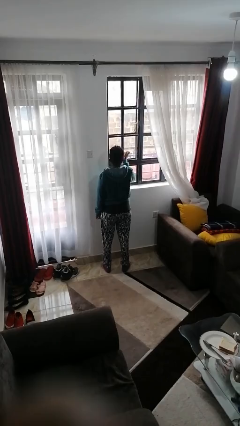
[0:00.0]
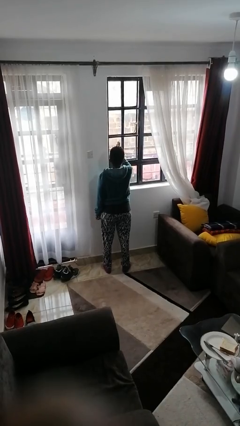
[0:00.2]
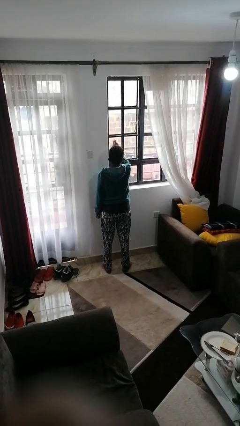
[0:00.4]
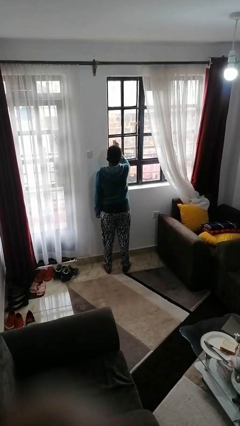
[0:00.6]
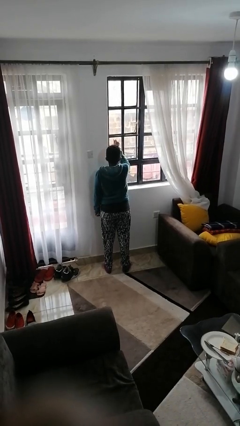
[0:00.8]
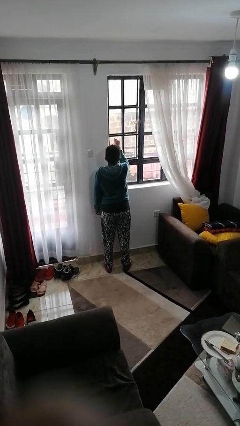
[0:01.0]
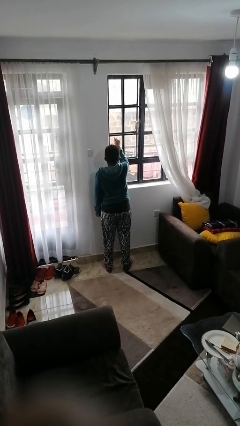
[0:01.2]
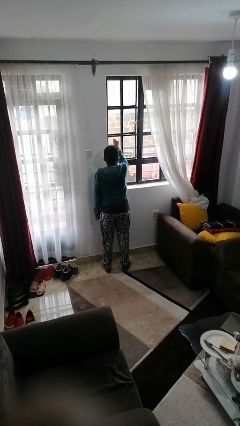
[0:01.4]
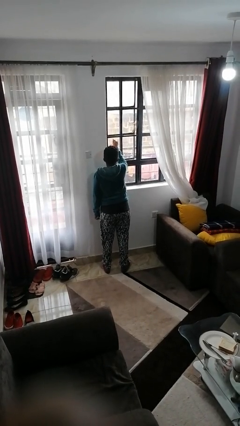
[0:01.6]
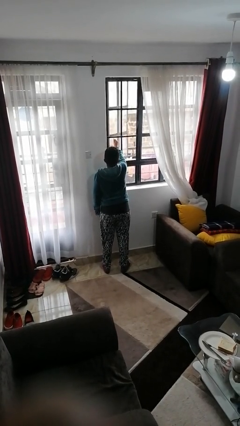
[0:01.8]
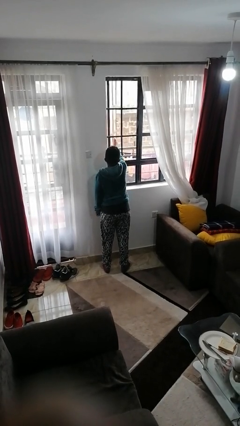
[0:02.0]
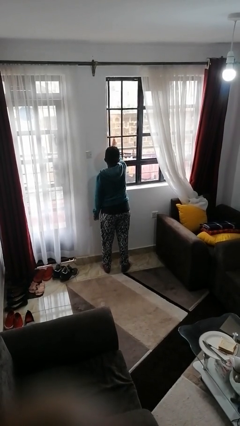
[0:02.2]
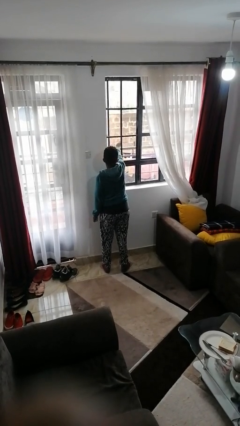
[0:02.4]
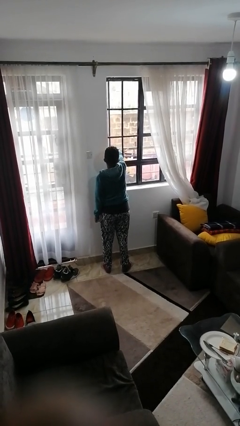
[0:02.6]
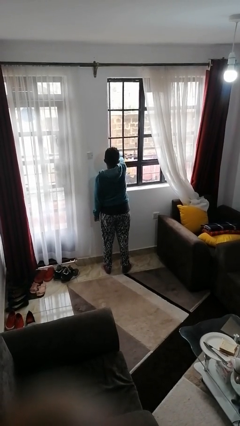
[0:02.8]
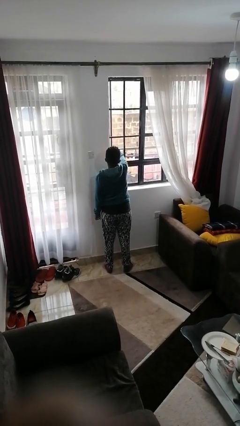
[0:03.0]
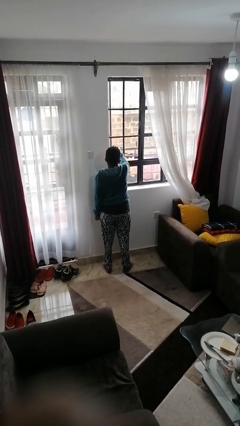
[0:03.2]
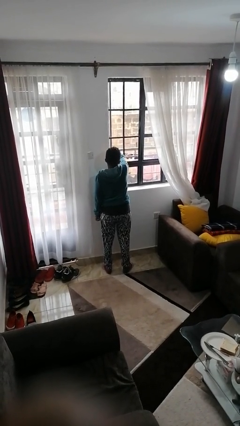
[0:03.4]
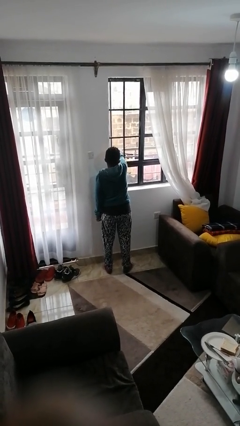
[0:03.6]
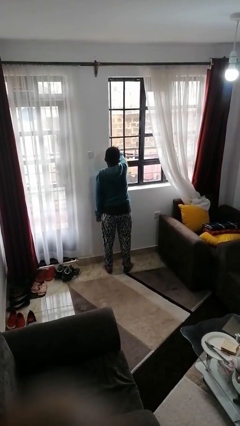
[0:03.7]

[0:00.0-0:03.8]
person opens home window

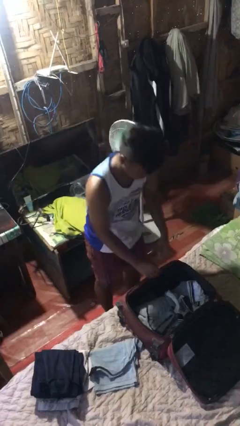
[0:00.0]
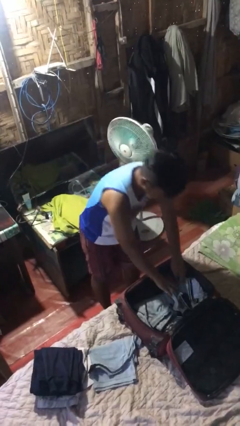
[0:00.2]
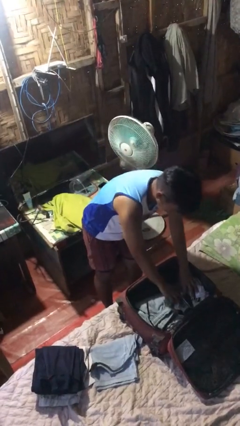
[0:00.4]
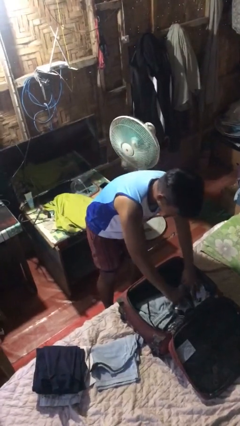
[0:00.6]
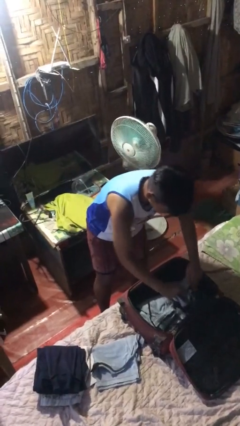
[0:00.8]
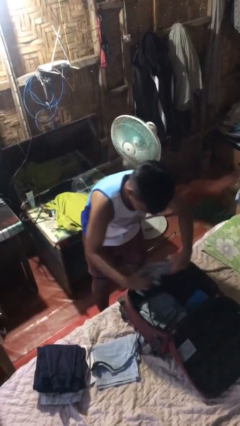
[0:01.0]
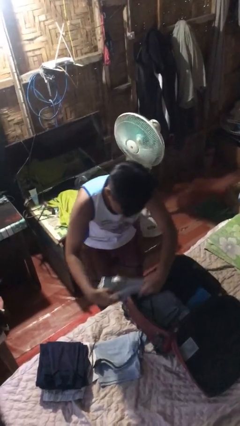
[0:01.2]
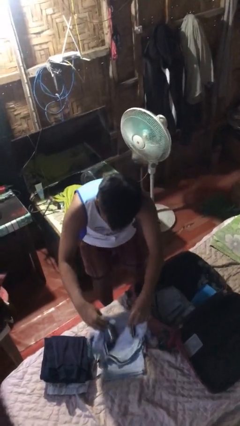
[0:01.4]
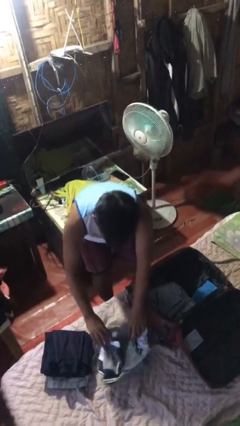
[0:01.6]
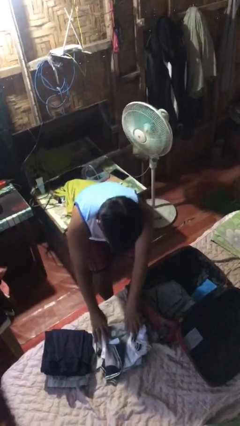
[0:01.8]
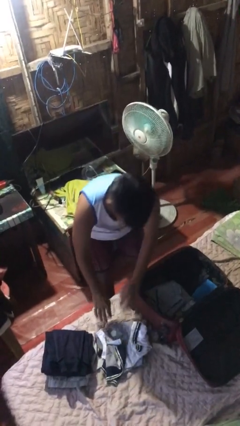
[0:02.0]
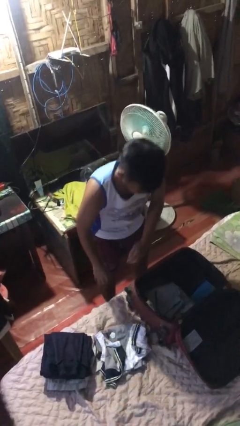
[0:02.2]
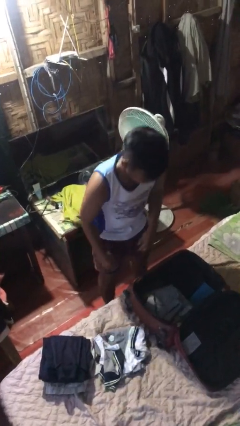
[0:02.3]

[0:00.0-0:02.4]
person unloads clothes from suitcase

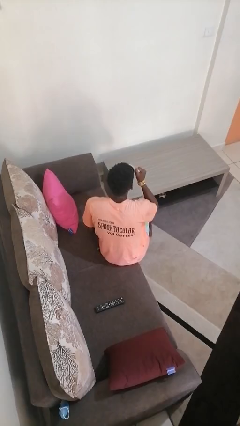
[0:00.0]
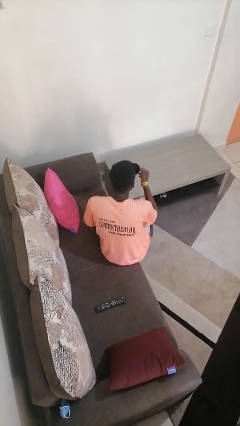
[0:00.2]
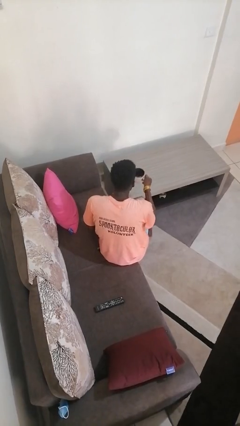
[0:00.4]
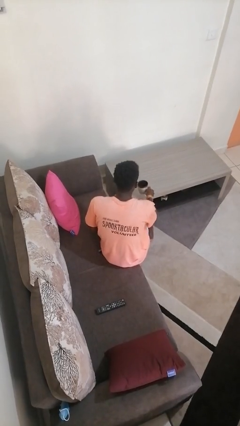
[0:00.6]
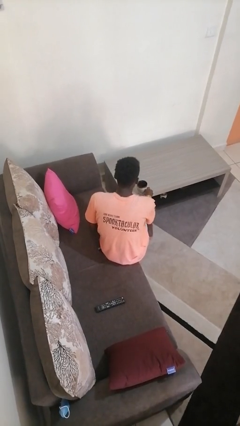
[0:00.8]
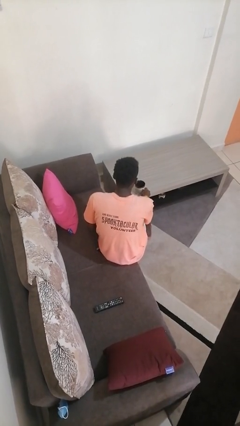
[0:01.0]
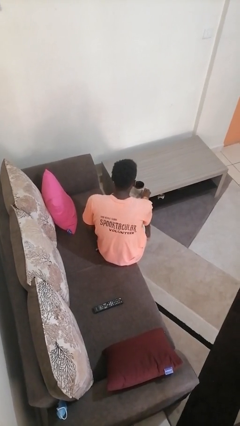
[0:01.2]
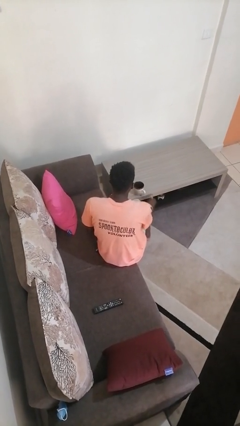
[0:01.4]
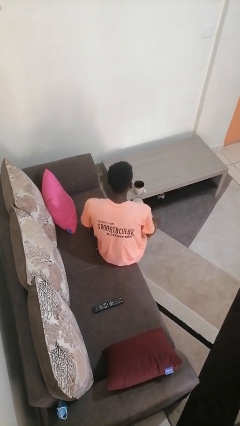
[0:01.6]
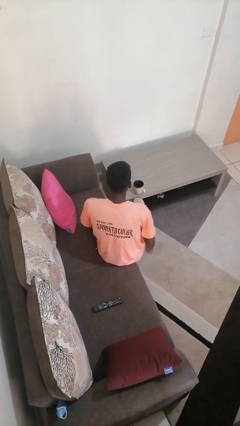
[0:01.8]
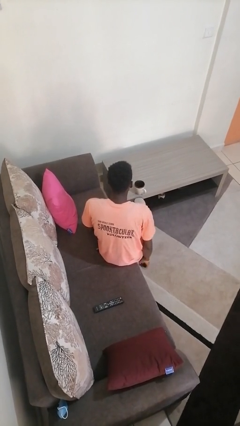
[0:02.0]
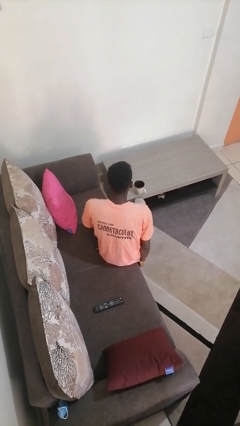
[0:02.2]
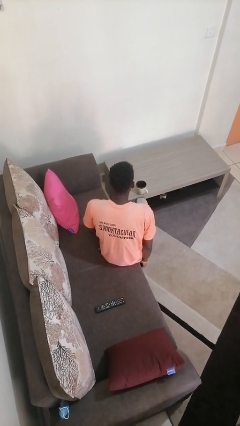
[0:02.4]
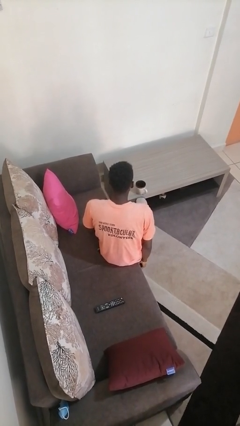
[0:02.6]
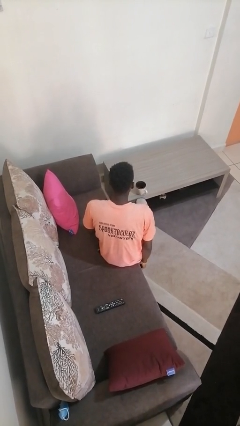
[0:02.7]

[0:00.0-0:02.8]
person puts down object on table

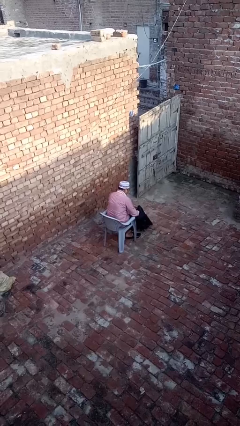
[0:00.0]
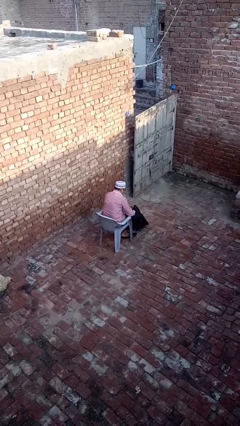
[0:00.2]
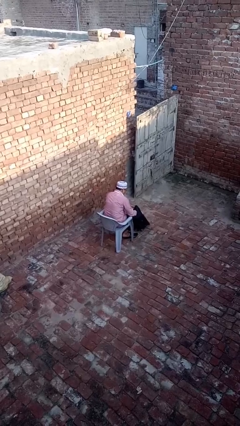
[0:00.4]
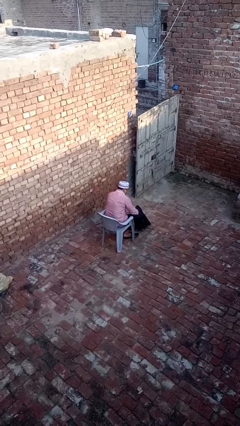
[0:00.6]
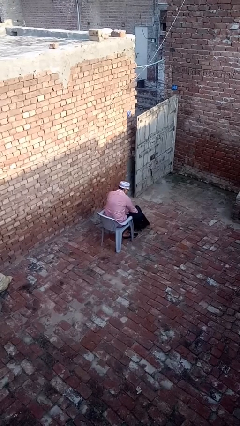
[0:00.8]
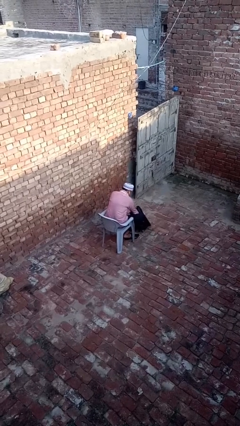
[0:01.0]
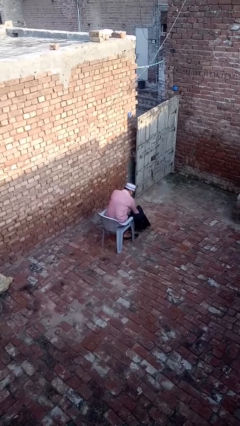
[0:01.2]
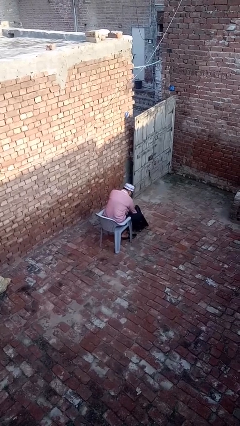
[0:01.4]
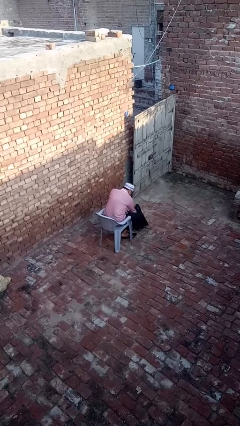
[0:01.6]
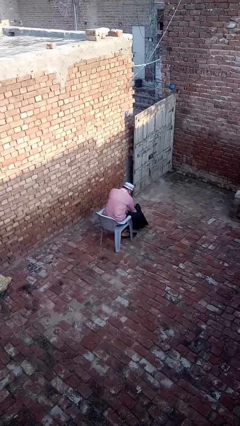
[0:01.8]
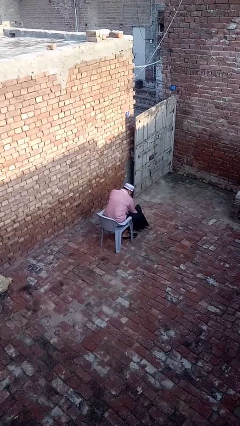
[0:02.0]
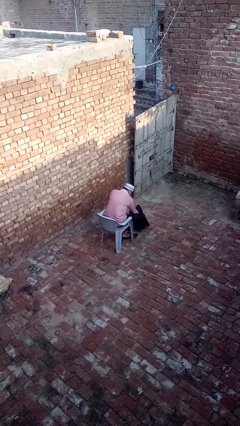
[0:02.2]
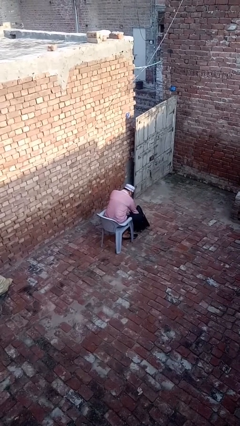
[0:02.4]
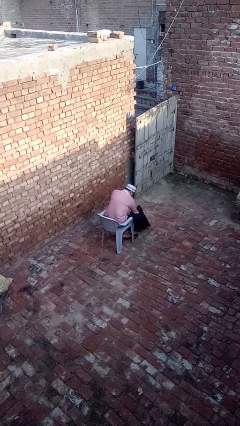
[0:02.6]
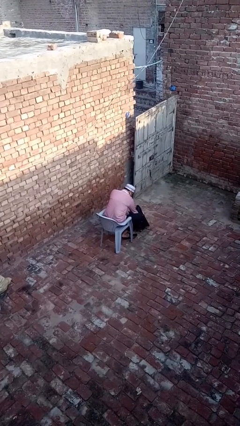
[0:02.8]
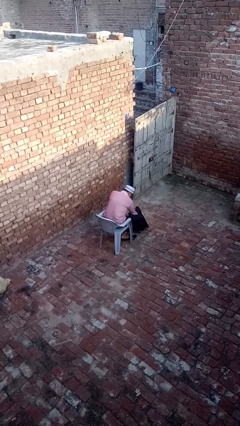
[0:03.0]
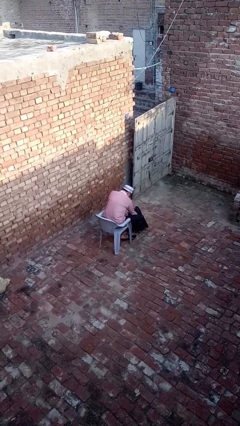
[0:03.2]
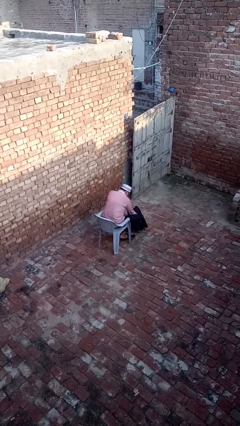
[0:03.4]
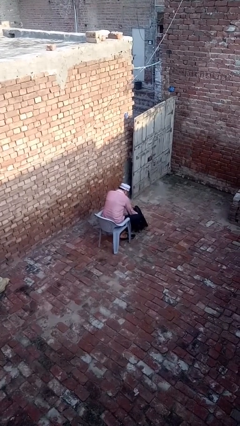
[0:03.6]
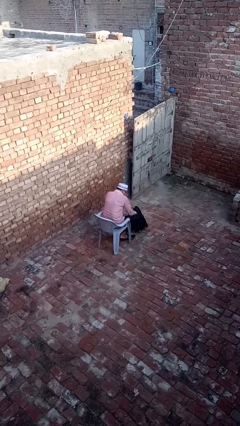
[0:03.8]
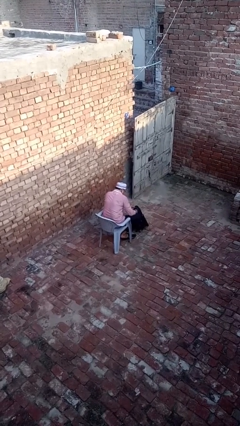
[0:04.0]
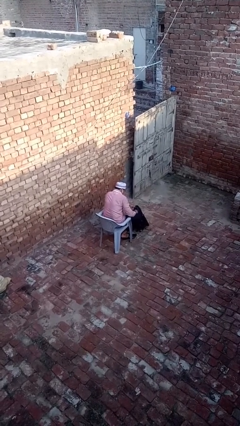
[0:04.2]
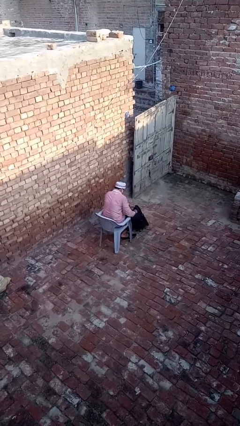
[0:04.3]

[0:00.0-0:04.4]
person searches in backpack

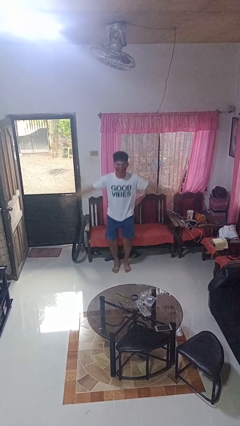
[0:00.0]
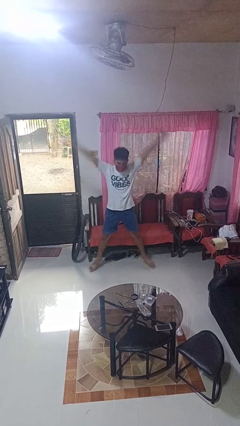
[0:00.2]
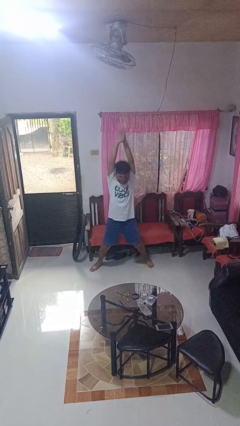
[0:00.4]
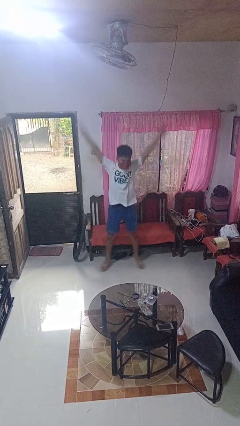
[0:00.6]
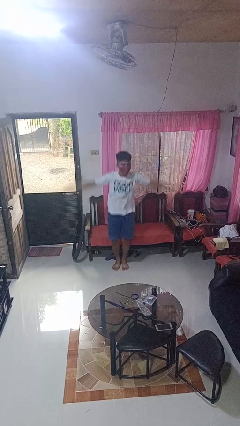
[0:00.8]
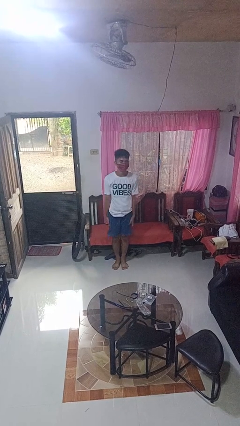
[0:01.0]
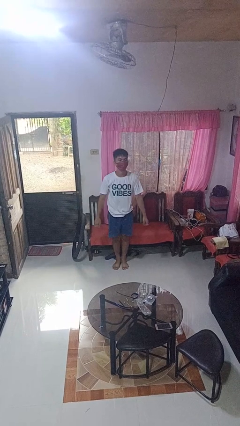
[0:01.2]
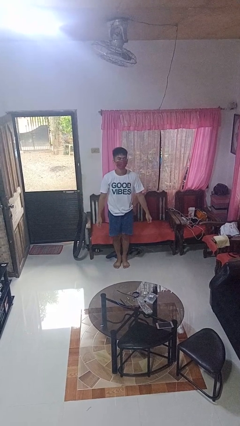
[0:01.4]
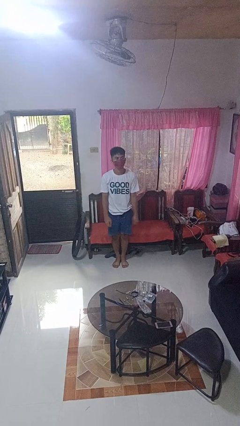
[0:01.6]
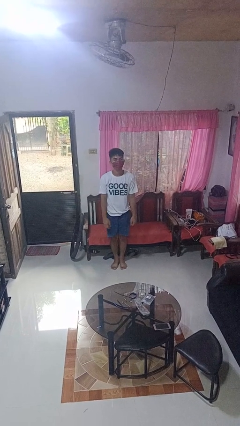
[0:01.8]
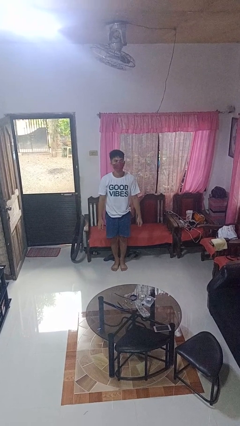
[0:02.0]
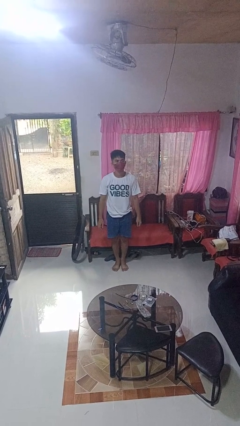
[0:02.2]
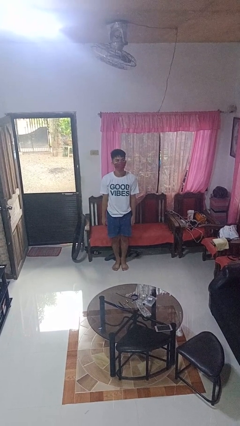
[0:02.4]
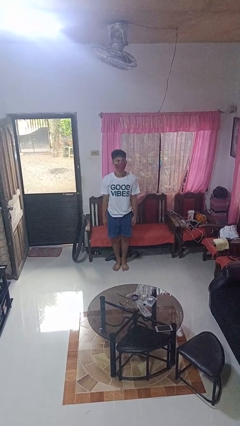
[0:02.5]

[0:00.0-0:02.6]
person exercises with jumping jacks

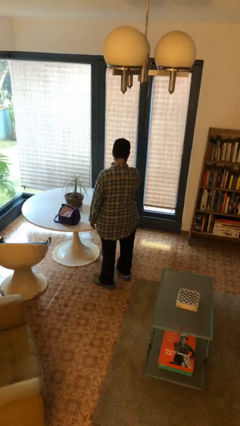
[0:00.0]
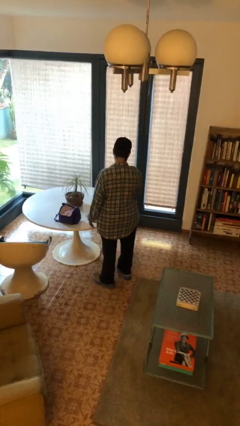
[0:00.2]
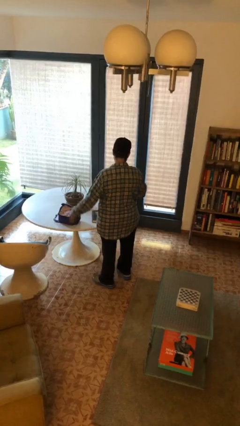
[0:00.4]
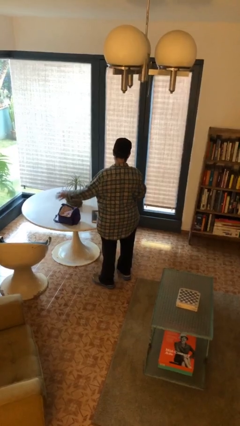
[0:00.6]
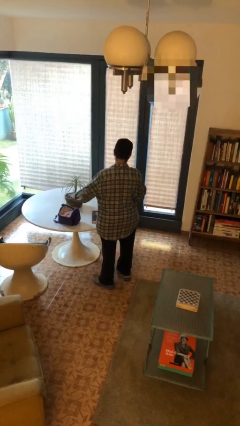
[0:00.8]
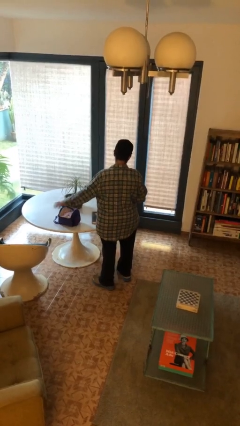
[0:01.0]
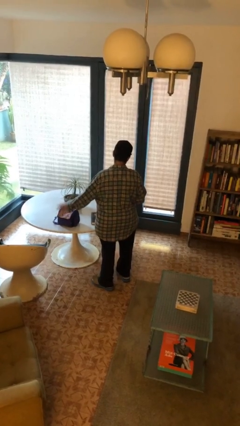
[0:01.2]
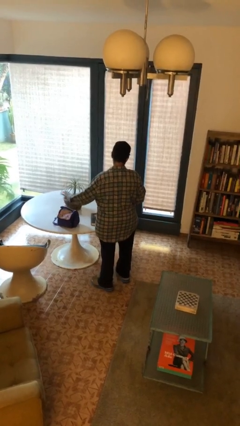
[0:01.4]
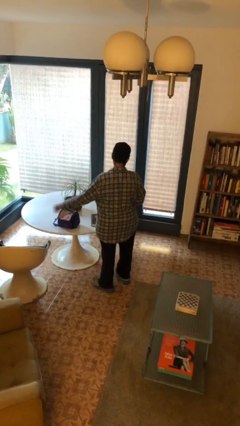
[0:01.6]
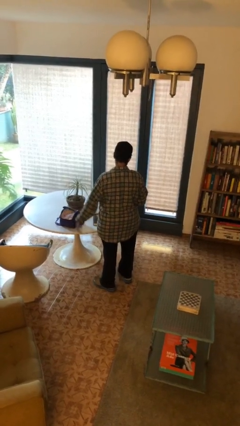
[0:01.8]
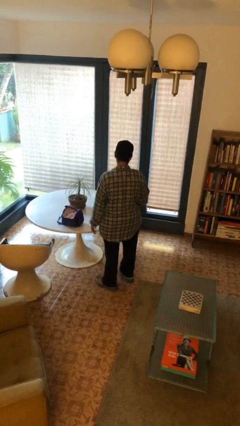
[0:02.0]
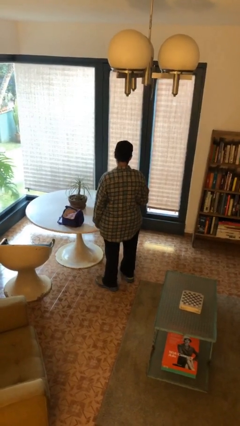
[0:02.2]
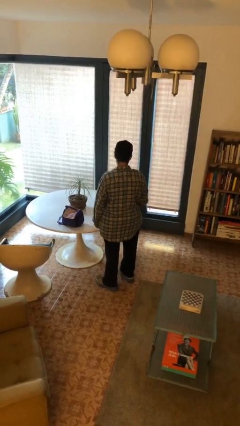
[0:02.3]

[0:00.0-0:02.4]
person waves hand over object
